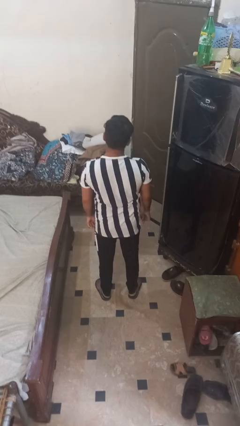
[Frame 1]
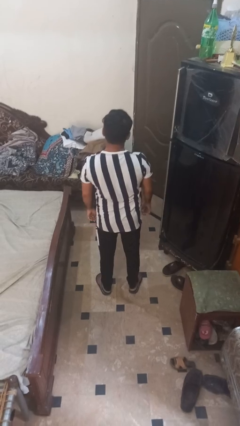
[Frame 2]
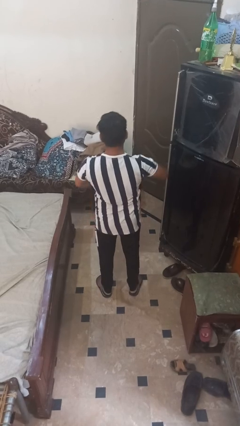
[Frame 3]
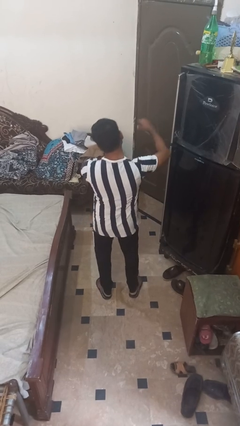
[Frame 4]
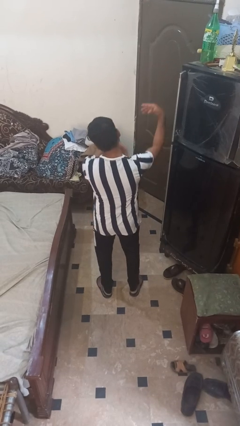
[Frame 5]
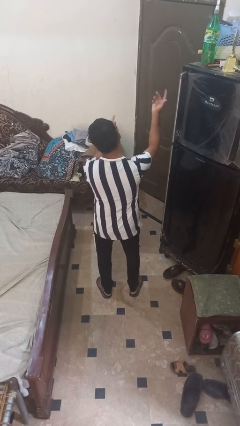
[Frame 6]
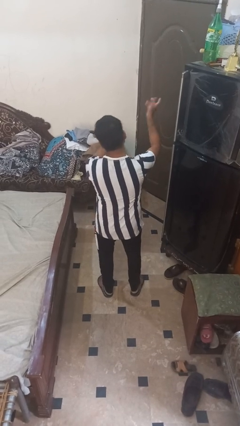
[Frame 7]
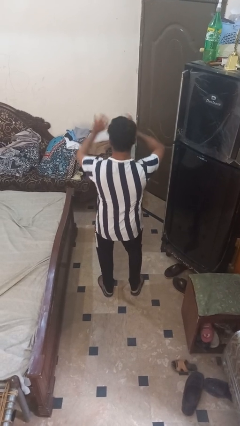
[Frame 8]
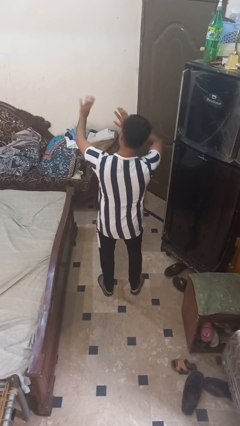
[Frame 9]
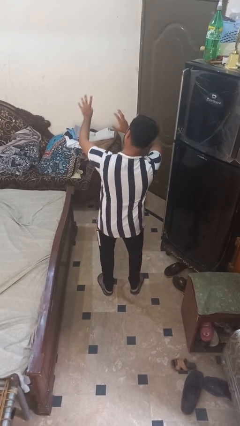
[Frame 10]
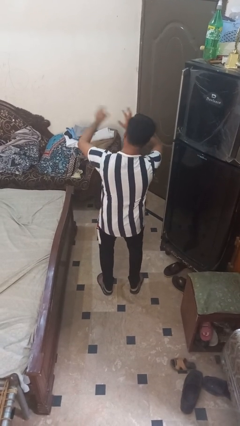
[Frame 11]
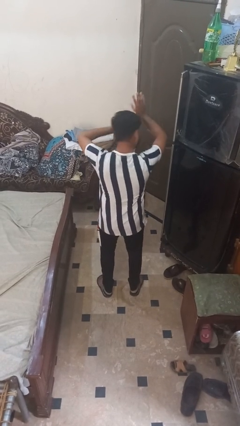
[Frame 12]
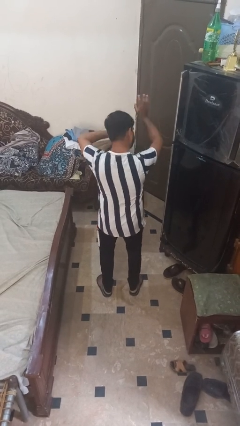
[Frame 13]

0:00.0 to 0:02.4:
person dances in place

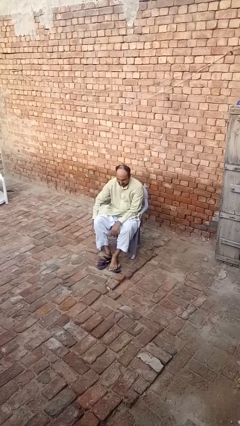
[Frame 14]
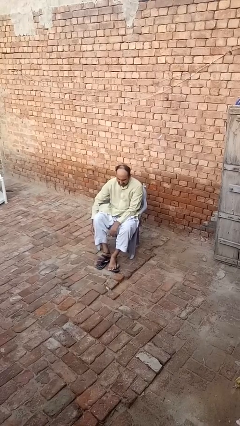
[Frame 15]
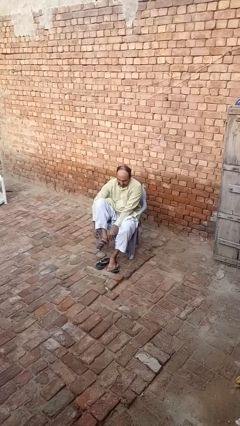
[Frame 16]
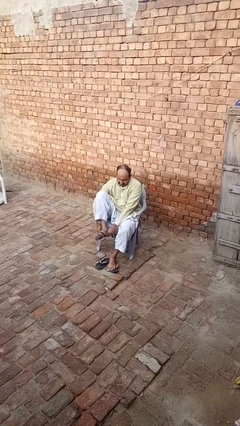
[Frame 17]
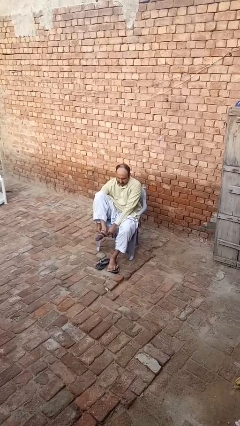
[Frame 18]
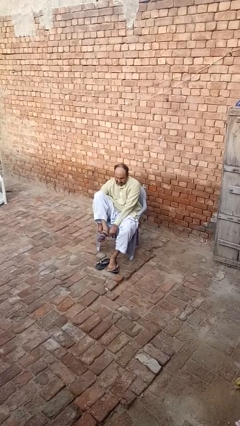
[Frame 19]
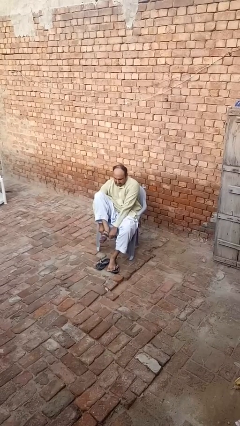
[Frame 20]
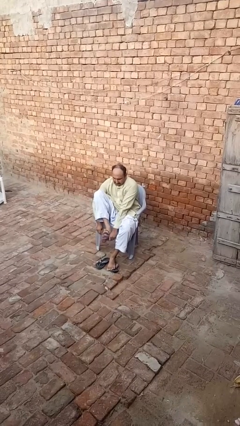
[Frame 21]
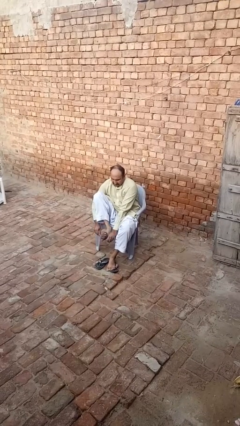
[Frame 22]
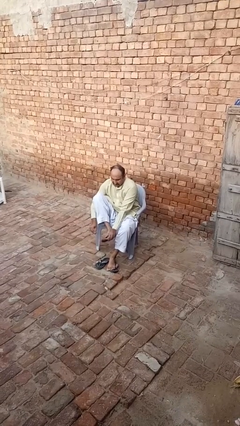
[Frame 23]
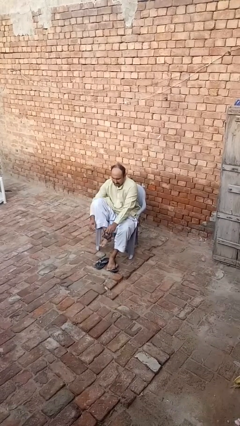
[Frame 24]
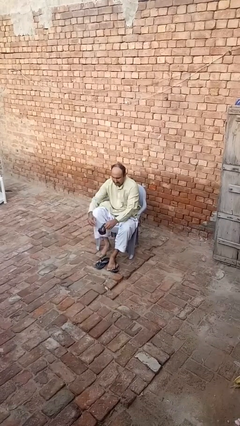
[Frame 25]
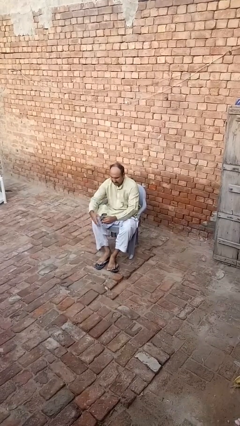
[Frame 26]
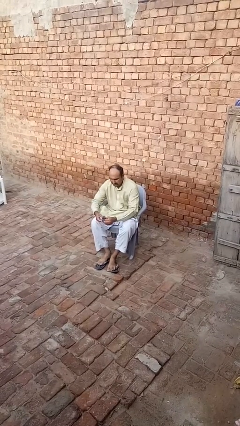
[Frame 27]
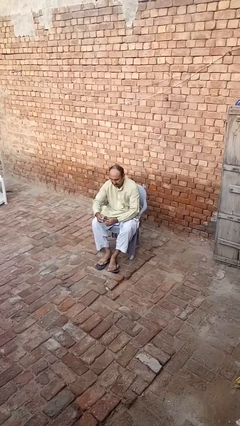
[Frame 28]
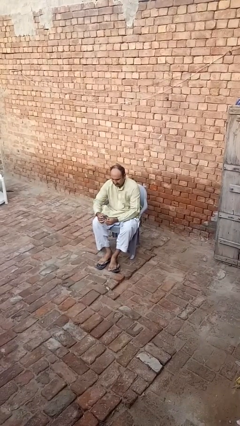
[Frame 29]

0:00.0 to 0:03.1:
person takes off socks

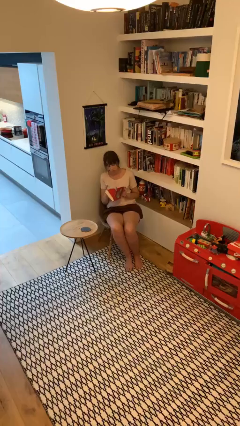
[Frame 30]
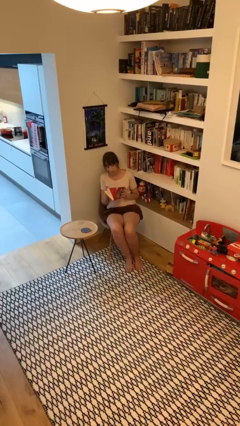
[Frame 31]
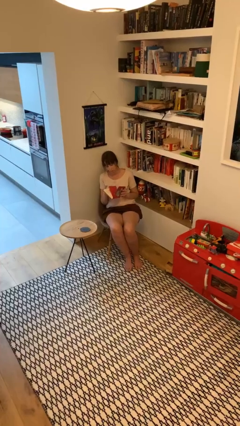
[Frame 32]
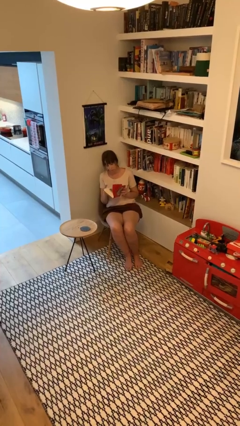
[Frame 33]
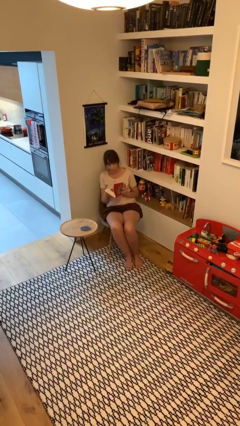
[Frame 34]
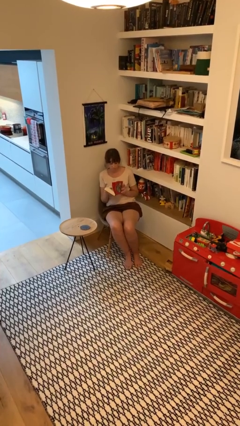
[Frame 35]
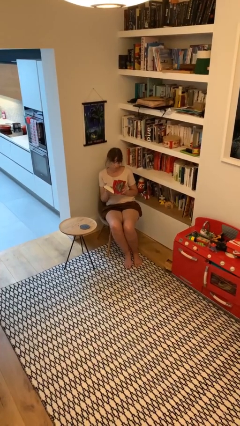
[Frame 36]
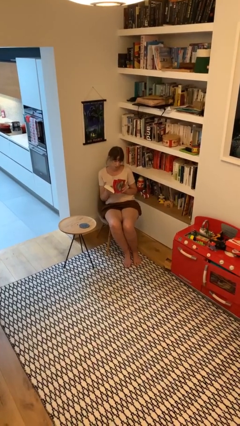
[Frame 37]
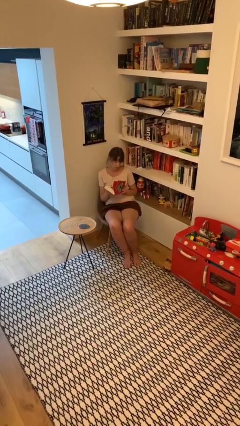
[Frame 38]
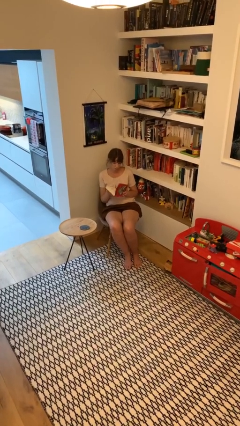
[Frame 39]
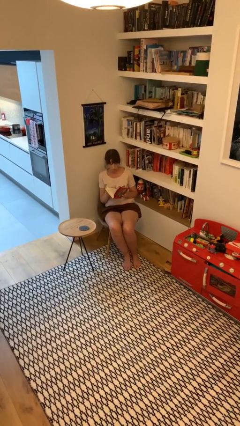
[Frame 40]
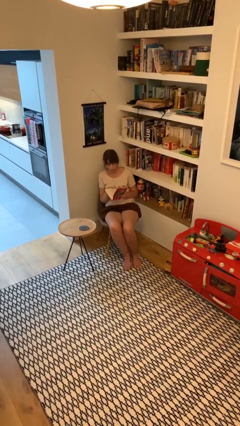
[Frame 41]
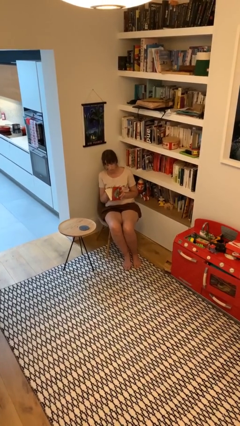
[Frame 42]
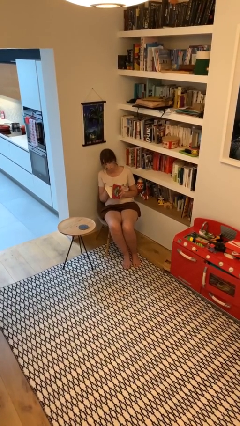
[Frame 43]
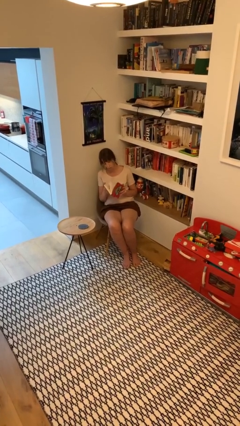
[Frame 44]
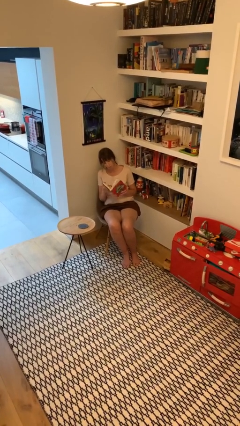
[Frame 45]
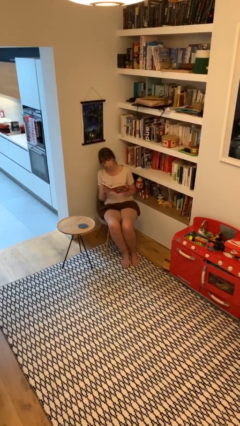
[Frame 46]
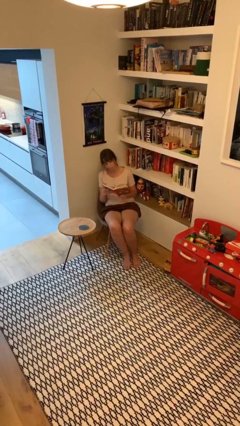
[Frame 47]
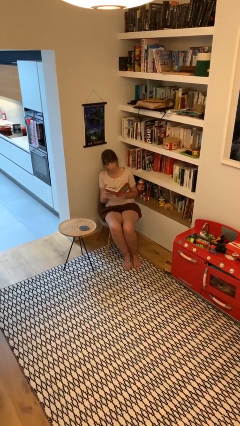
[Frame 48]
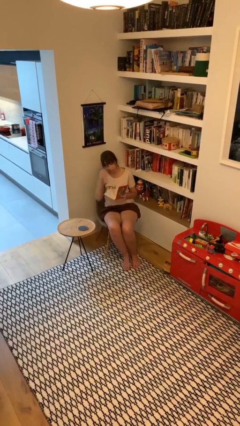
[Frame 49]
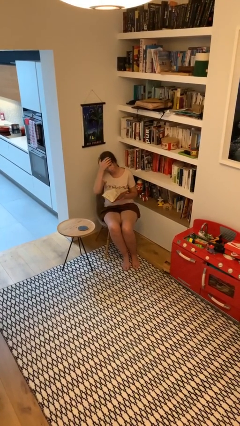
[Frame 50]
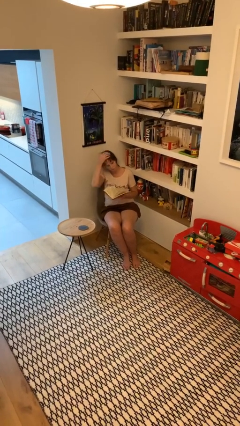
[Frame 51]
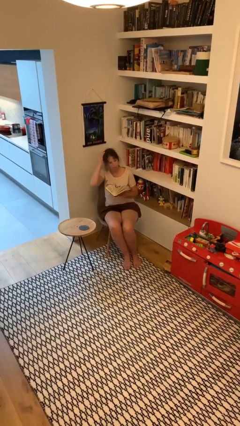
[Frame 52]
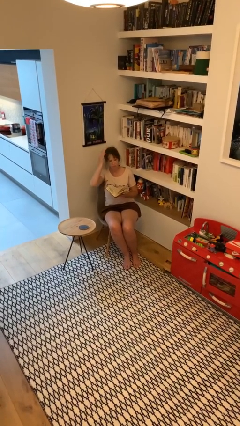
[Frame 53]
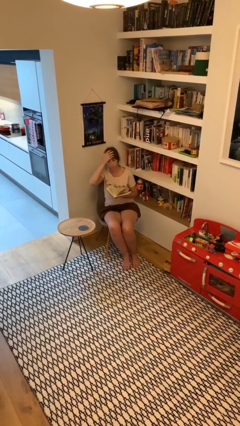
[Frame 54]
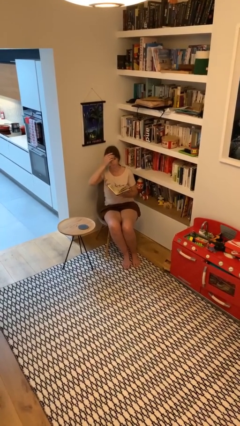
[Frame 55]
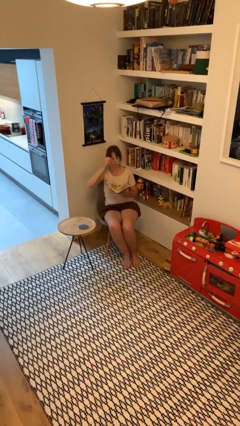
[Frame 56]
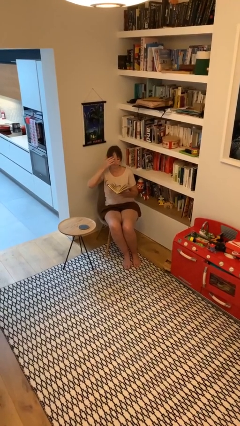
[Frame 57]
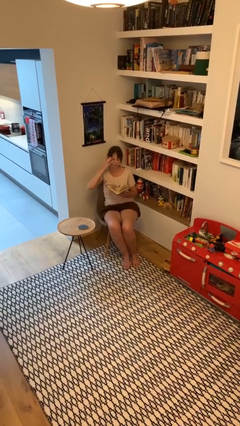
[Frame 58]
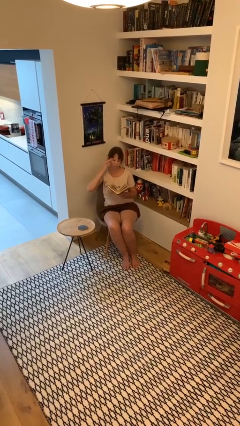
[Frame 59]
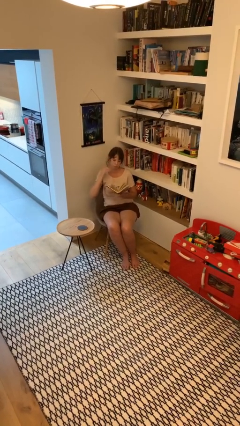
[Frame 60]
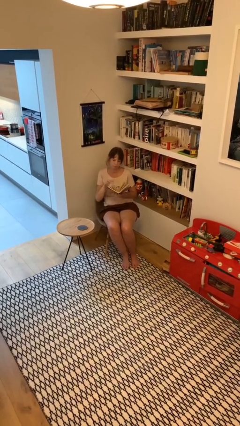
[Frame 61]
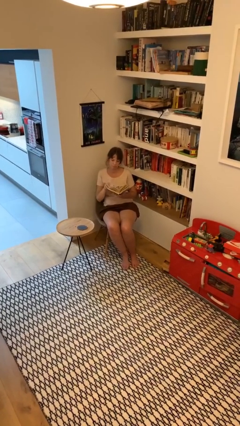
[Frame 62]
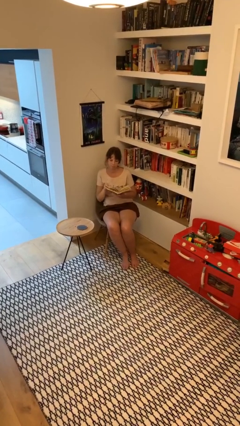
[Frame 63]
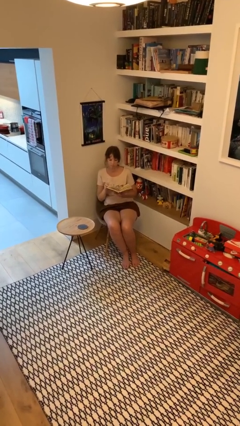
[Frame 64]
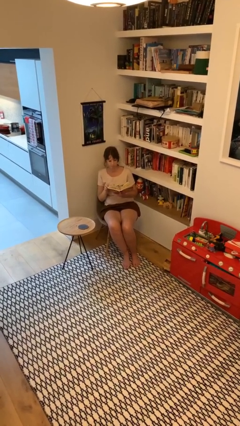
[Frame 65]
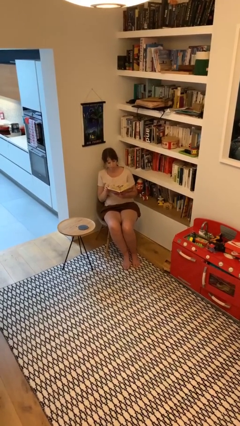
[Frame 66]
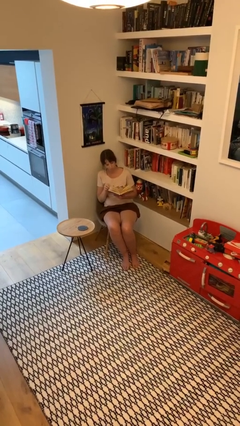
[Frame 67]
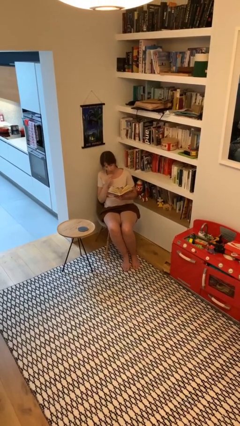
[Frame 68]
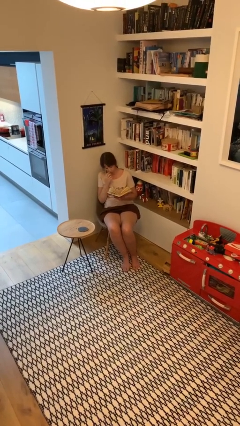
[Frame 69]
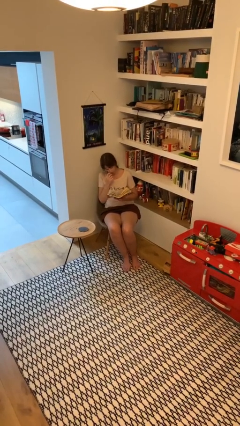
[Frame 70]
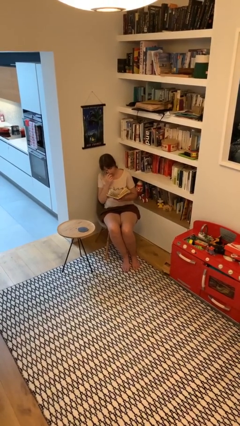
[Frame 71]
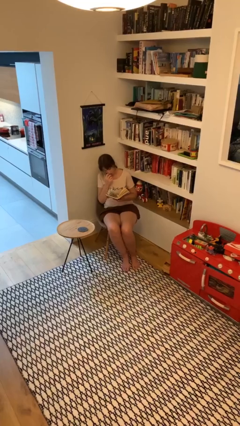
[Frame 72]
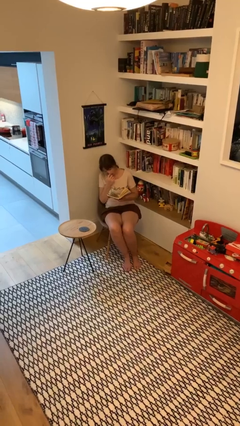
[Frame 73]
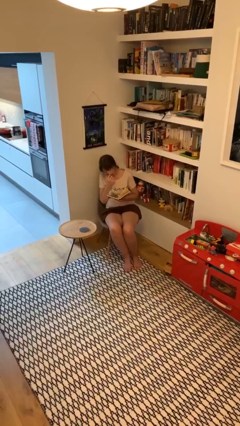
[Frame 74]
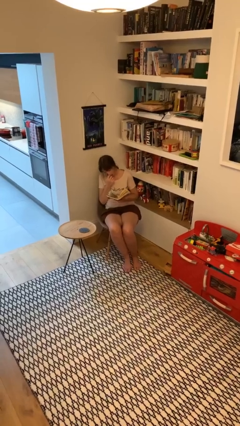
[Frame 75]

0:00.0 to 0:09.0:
person reads document

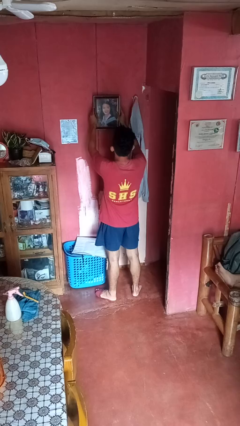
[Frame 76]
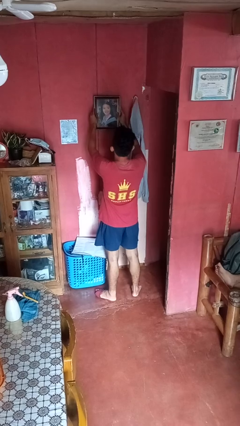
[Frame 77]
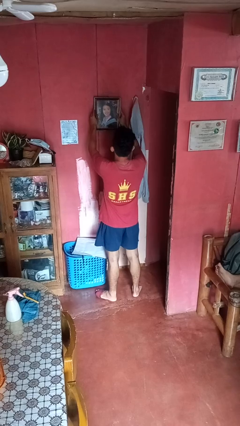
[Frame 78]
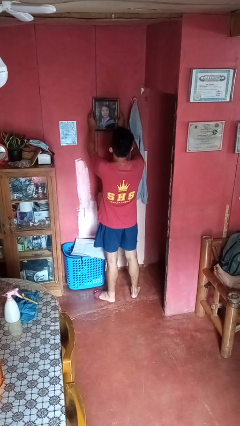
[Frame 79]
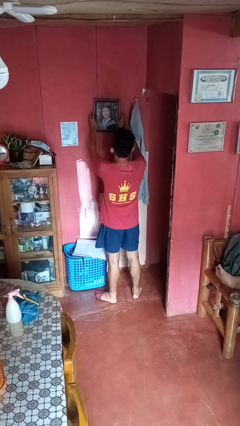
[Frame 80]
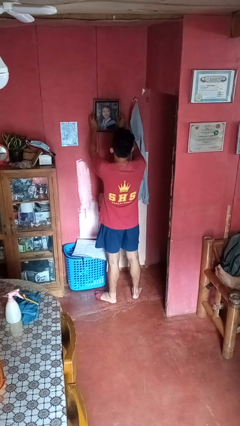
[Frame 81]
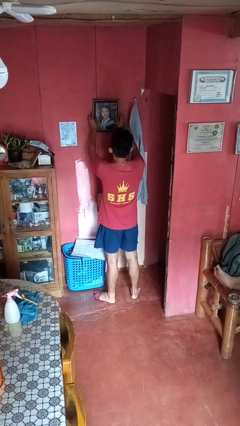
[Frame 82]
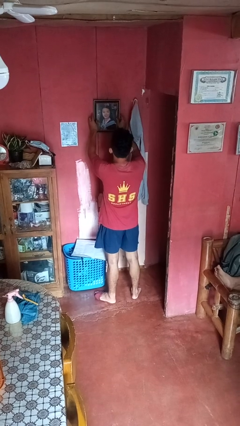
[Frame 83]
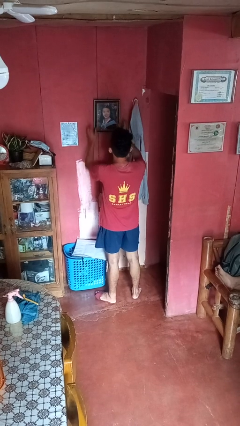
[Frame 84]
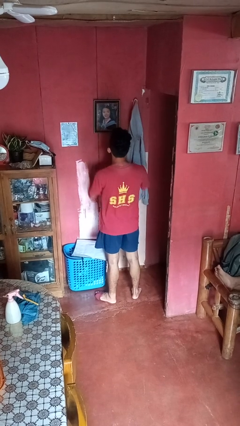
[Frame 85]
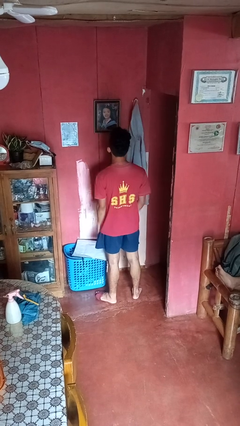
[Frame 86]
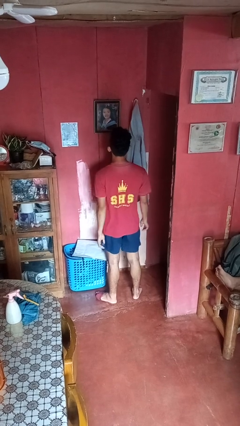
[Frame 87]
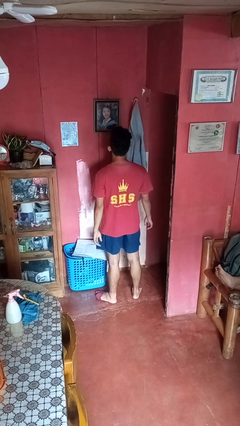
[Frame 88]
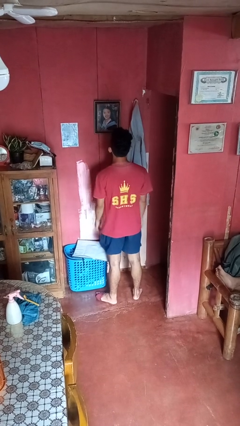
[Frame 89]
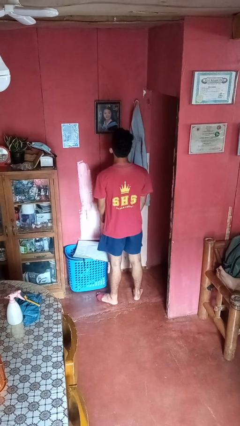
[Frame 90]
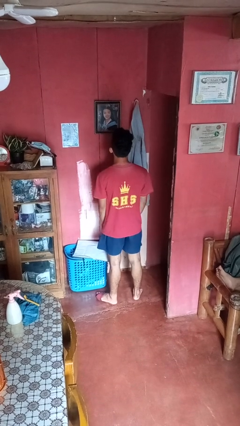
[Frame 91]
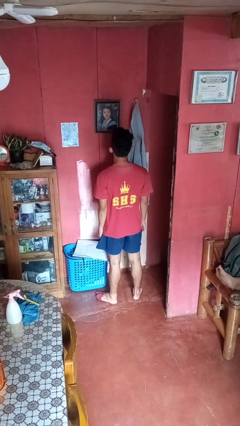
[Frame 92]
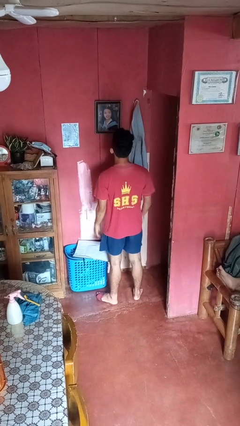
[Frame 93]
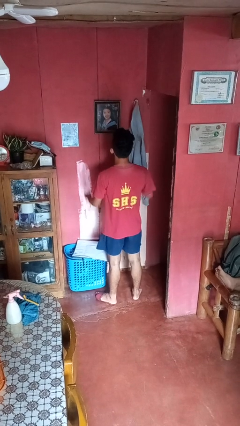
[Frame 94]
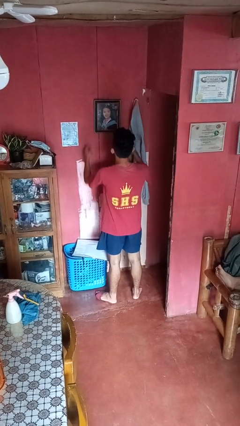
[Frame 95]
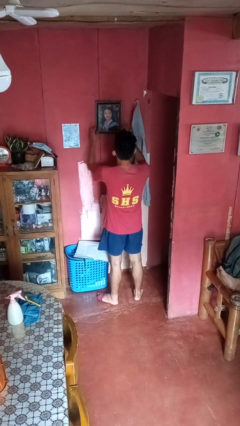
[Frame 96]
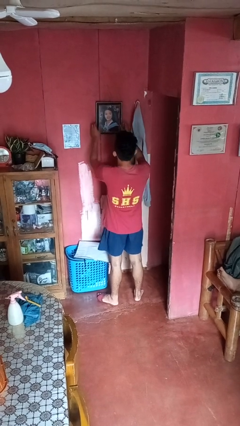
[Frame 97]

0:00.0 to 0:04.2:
person puts up picture frame
